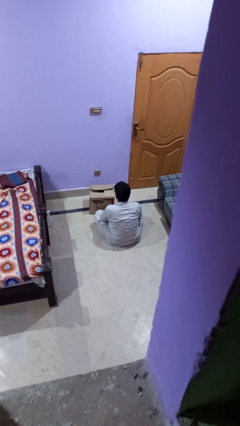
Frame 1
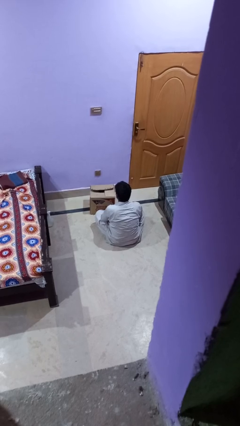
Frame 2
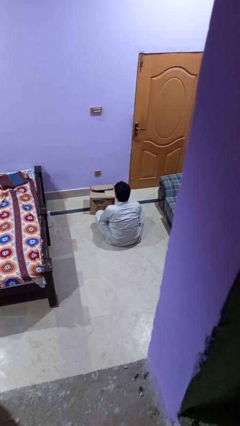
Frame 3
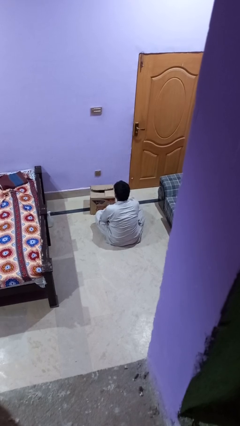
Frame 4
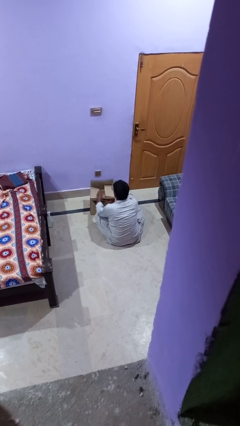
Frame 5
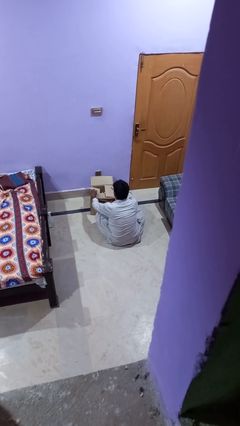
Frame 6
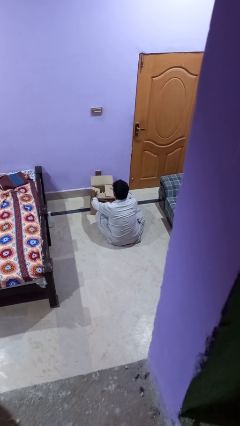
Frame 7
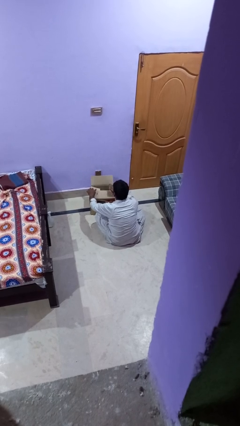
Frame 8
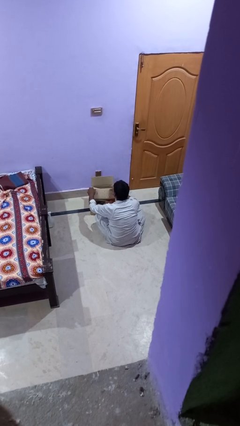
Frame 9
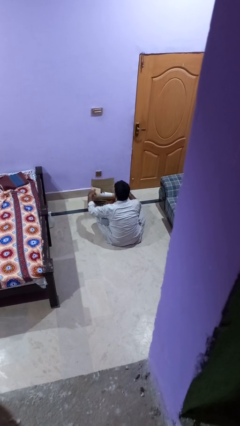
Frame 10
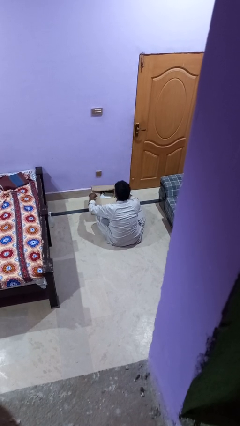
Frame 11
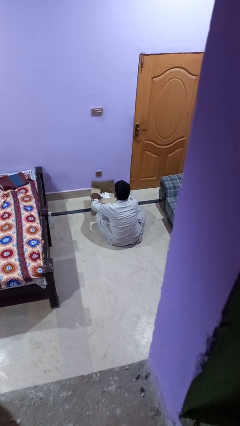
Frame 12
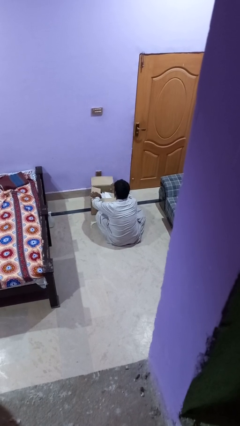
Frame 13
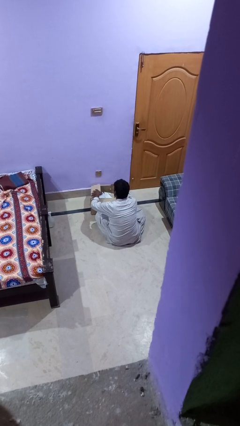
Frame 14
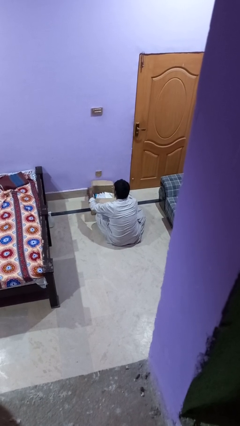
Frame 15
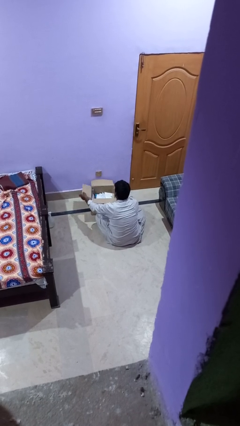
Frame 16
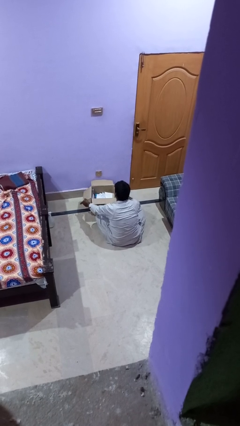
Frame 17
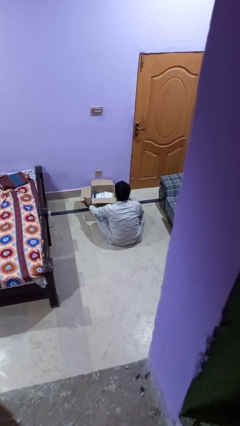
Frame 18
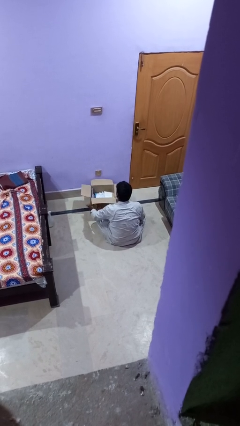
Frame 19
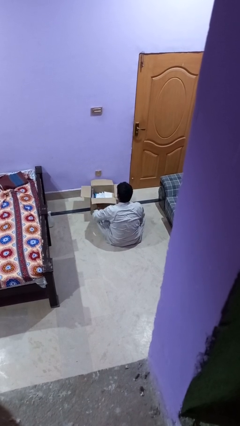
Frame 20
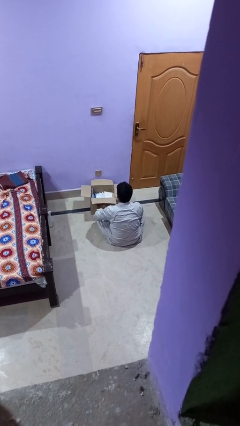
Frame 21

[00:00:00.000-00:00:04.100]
person opens box

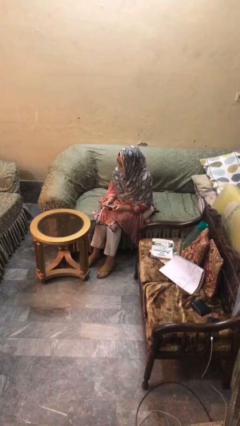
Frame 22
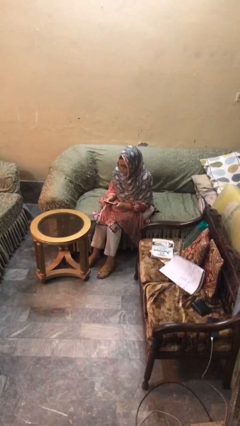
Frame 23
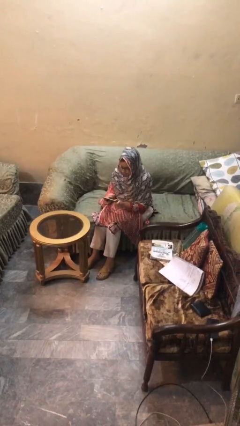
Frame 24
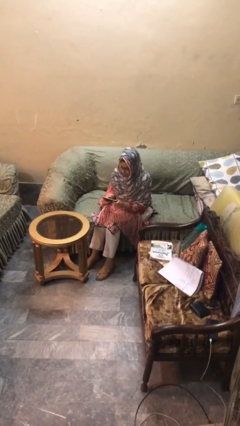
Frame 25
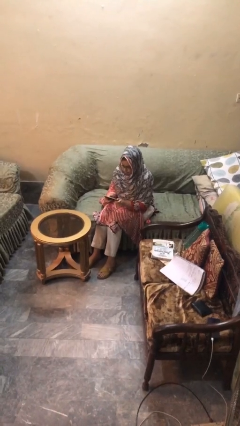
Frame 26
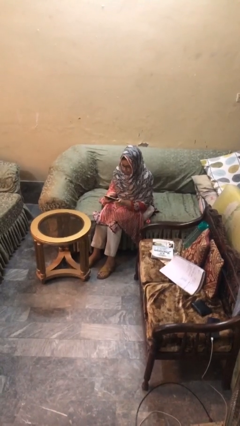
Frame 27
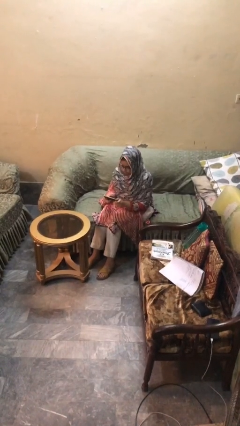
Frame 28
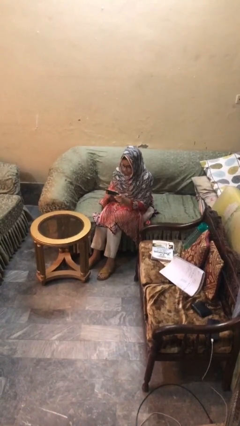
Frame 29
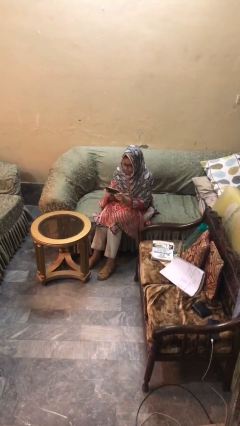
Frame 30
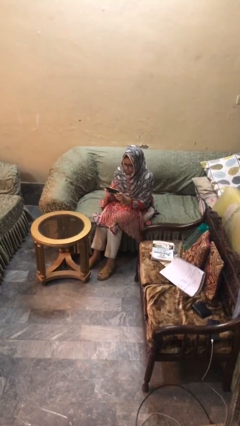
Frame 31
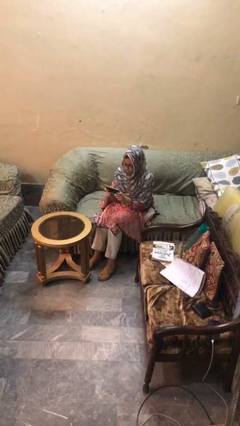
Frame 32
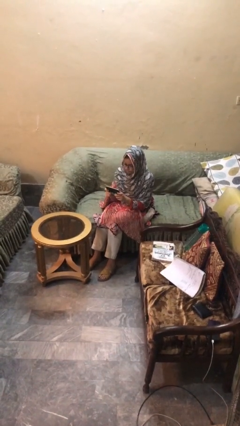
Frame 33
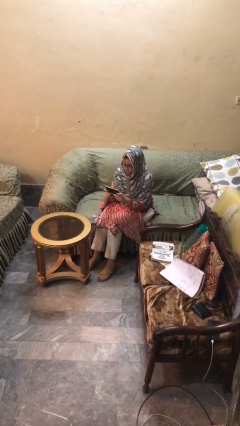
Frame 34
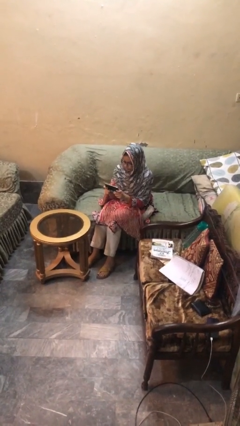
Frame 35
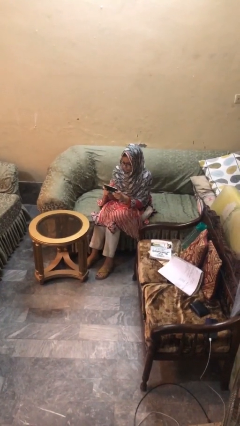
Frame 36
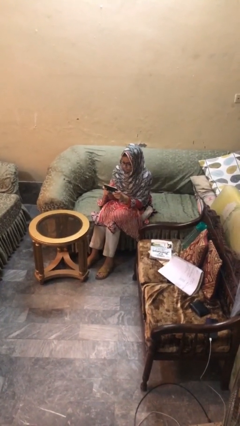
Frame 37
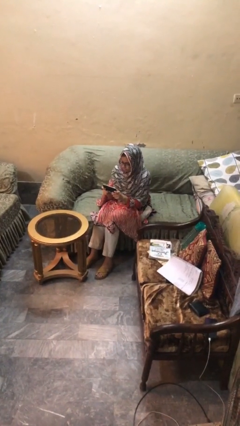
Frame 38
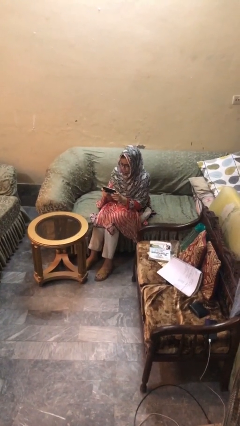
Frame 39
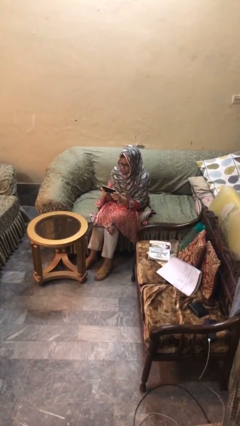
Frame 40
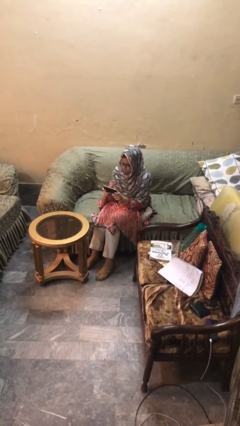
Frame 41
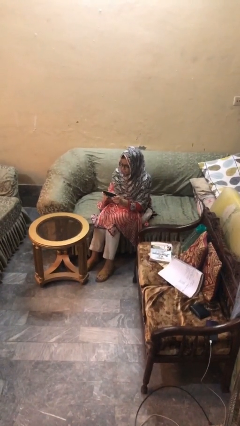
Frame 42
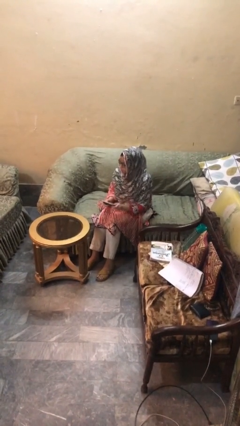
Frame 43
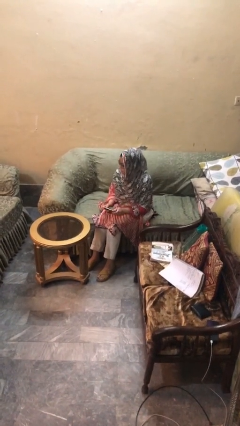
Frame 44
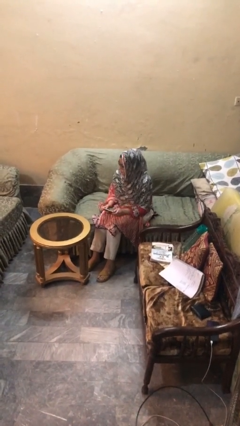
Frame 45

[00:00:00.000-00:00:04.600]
person interacts with handheld game

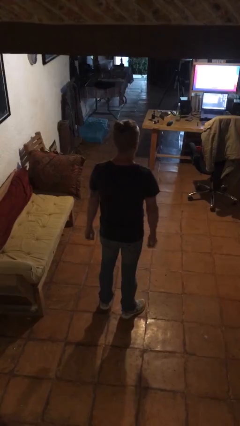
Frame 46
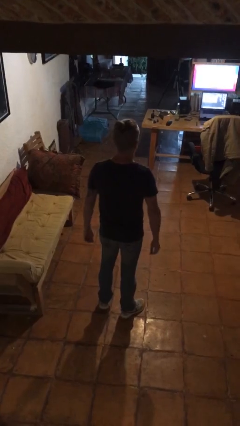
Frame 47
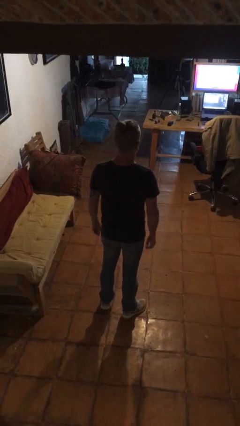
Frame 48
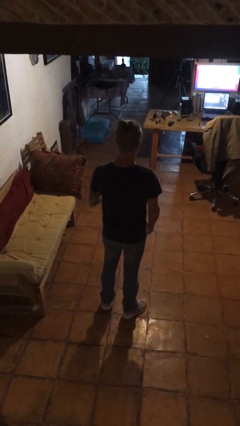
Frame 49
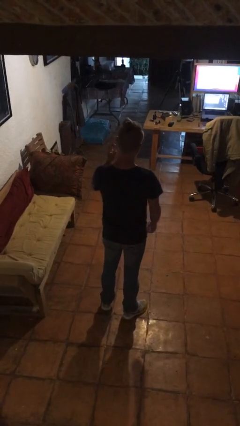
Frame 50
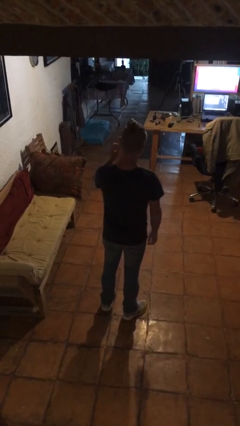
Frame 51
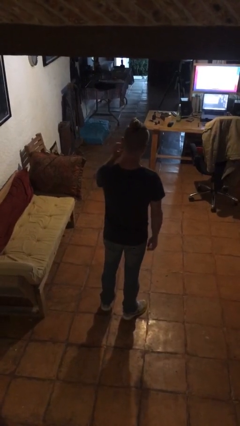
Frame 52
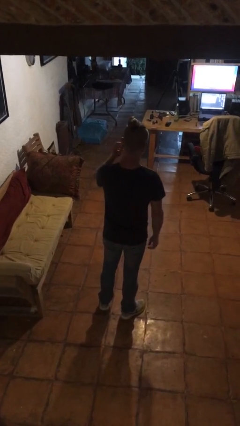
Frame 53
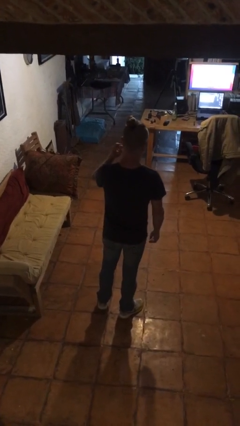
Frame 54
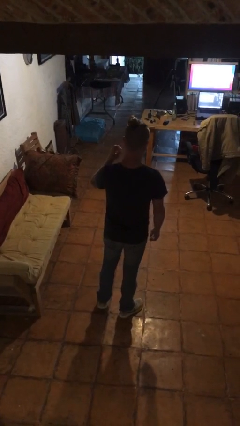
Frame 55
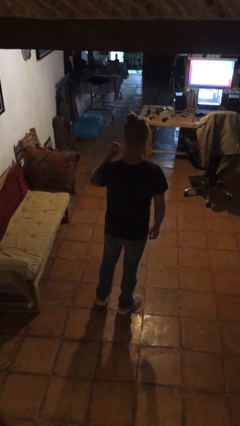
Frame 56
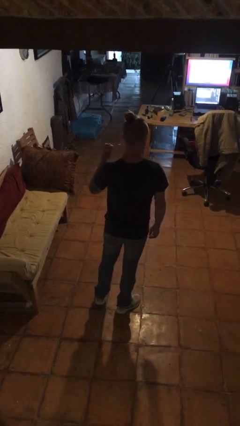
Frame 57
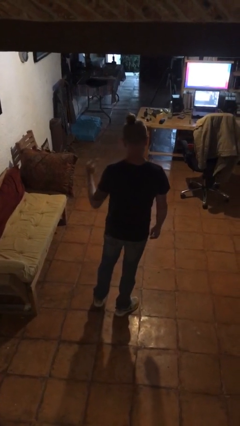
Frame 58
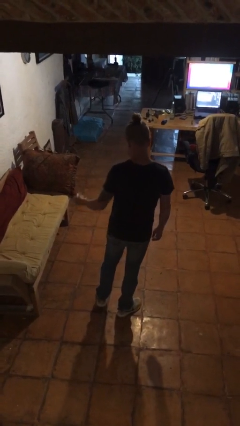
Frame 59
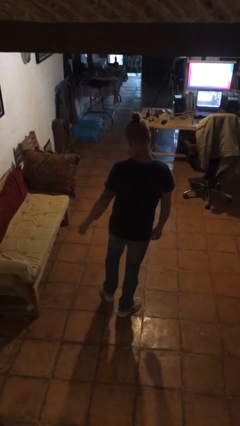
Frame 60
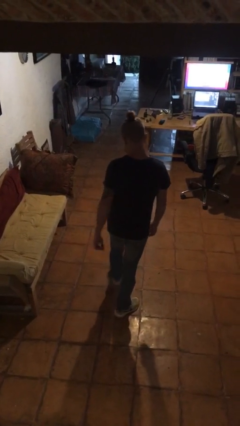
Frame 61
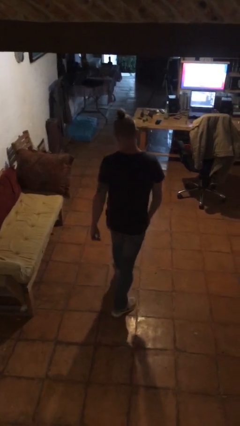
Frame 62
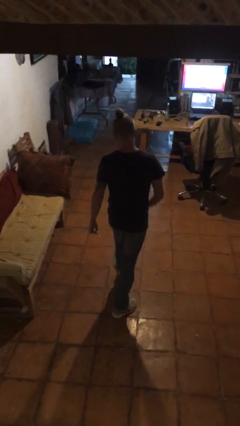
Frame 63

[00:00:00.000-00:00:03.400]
person takes off earrings

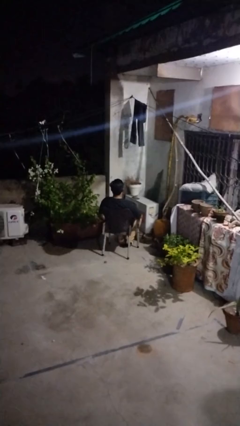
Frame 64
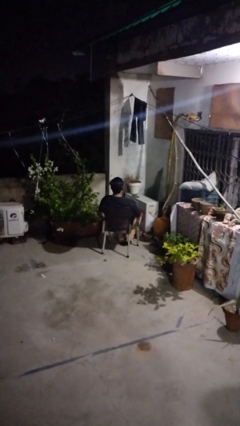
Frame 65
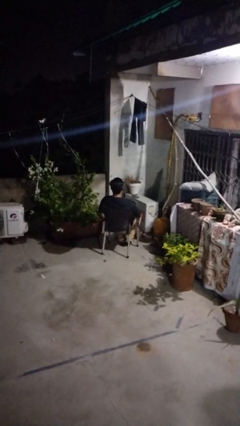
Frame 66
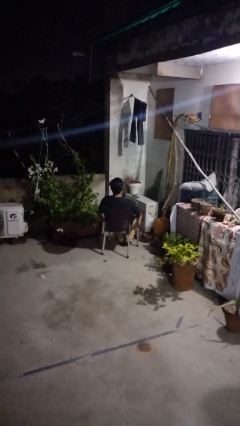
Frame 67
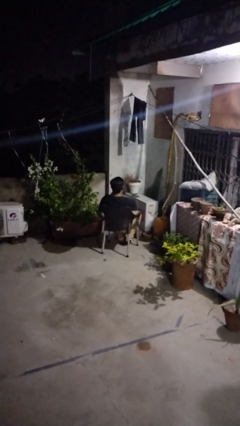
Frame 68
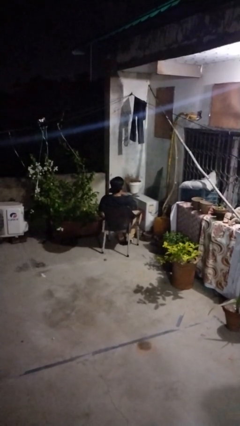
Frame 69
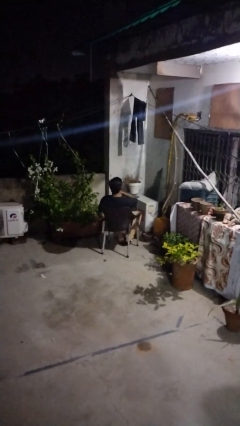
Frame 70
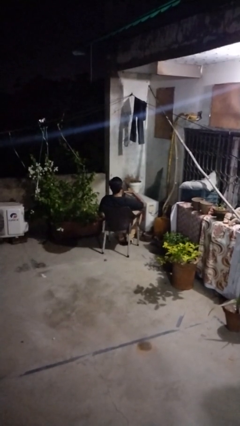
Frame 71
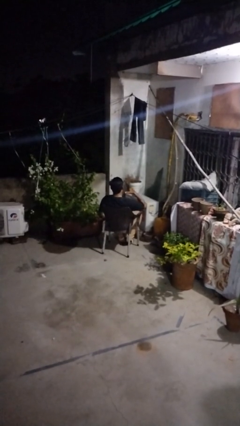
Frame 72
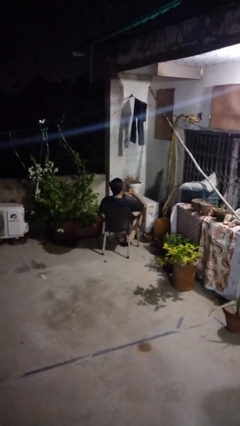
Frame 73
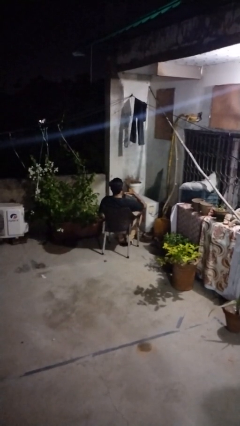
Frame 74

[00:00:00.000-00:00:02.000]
person gestures cut

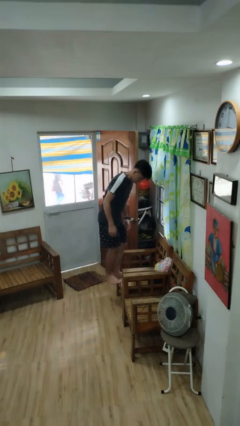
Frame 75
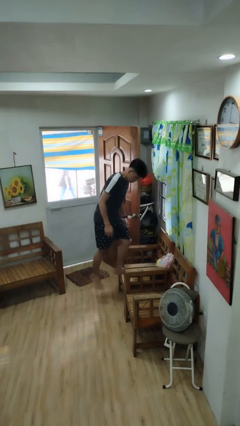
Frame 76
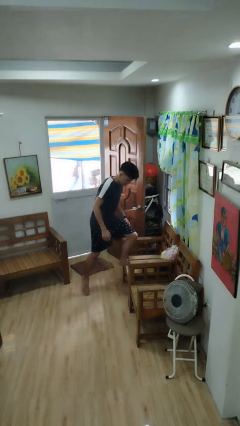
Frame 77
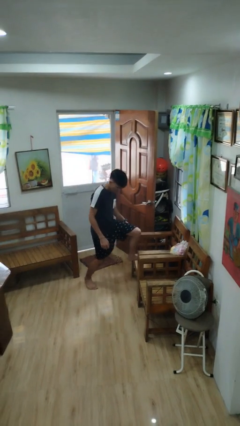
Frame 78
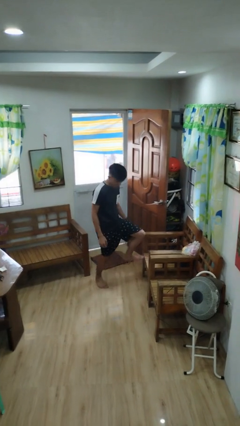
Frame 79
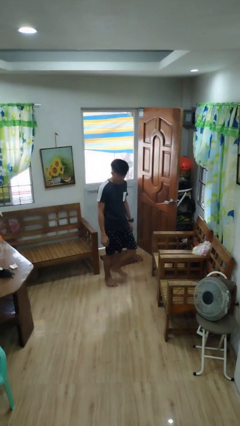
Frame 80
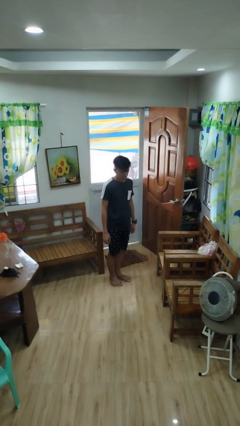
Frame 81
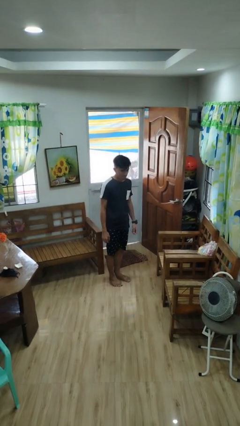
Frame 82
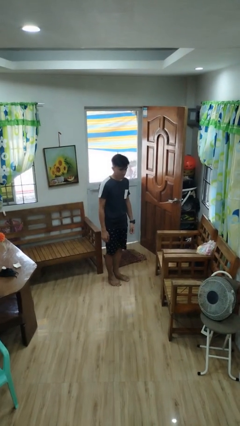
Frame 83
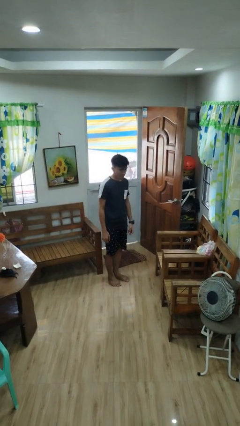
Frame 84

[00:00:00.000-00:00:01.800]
person climbs off chair

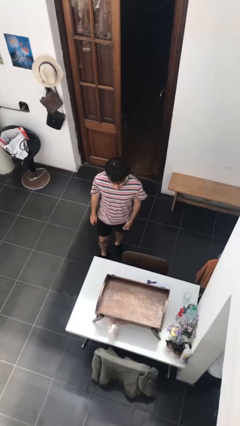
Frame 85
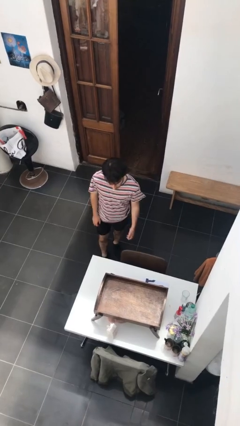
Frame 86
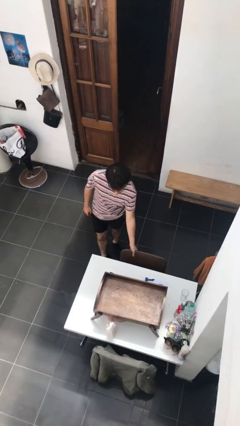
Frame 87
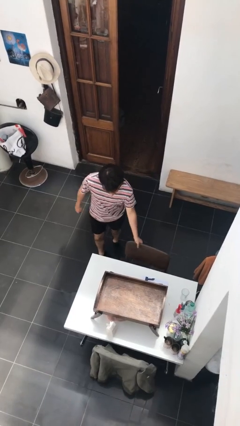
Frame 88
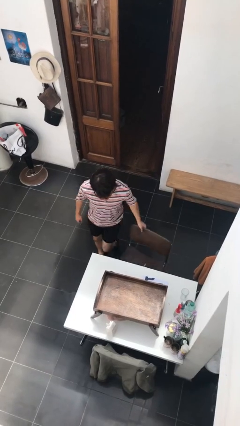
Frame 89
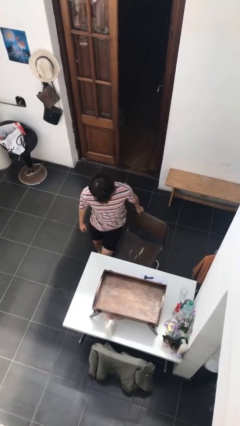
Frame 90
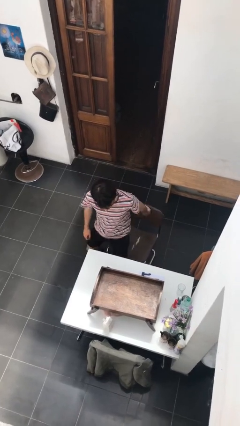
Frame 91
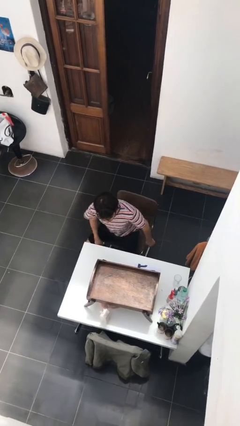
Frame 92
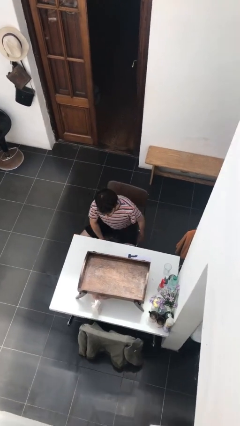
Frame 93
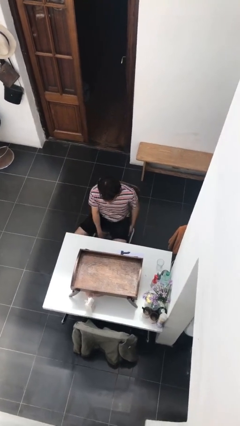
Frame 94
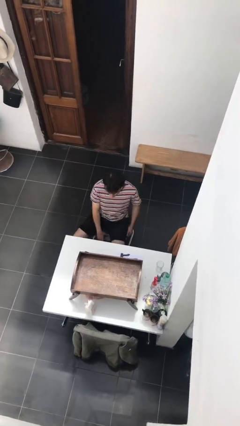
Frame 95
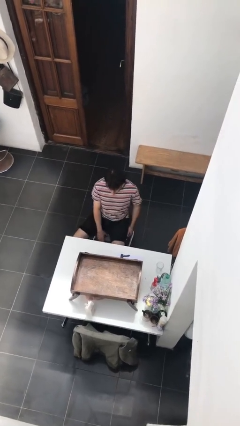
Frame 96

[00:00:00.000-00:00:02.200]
person sits down
